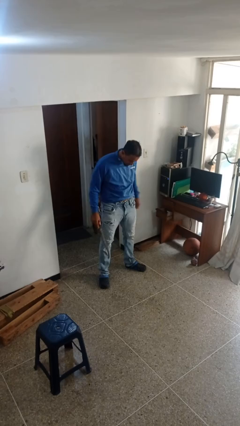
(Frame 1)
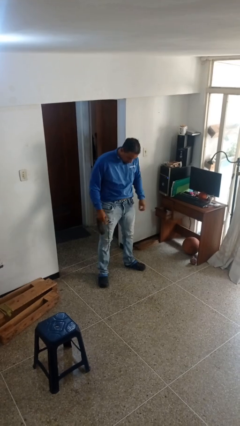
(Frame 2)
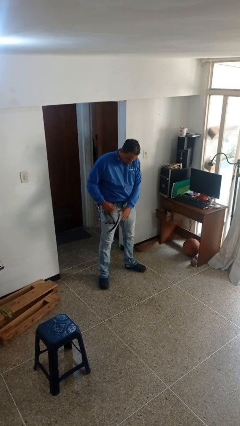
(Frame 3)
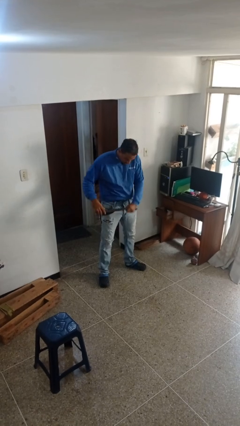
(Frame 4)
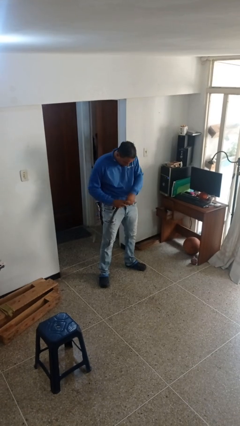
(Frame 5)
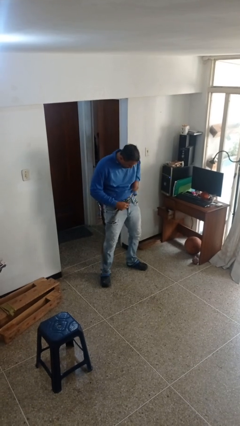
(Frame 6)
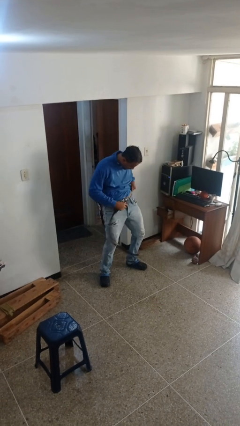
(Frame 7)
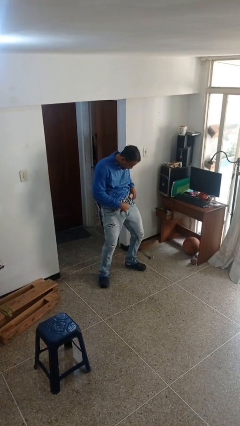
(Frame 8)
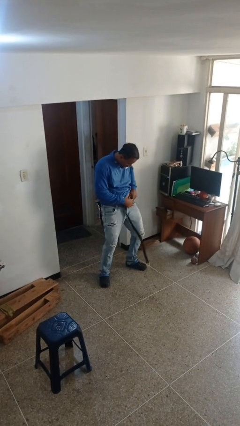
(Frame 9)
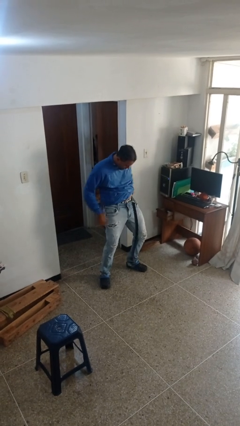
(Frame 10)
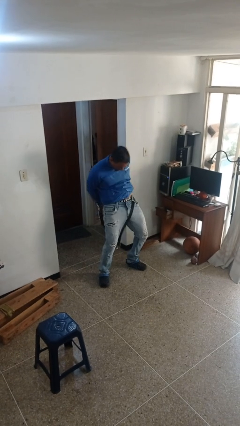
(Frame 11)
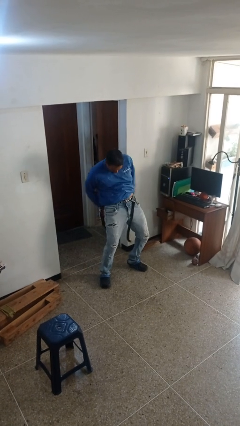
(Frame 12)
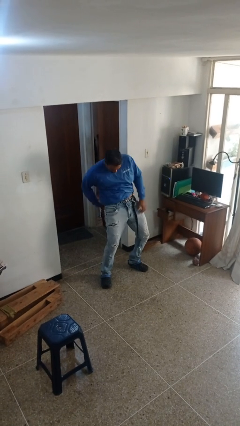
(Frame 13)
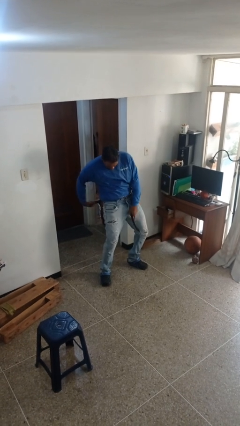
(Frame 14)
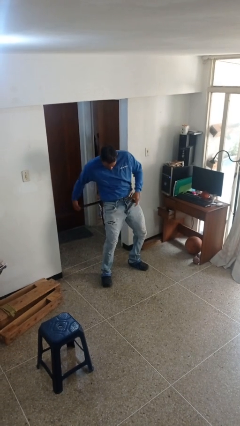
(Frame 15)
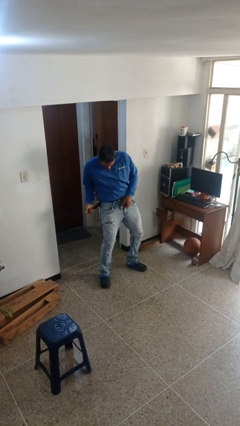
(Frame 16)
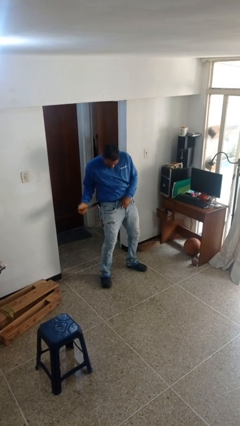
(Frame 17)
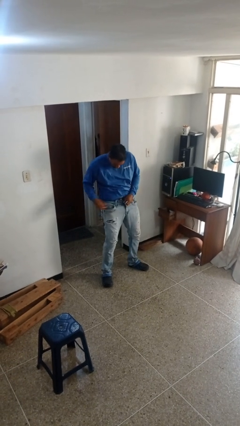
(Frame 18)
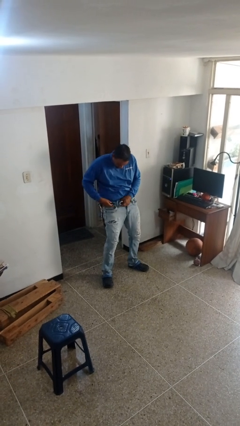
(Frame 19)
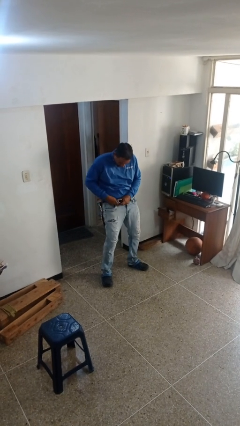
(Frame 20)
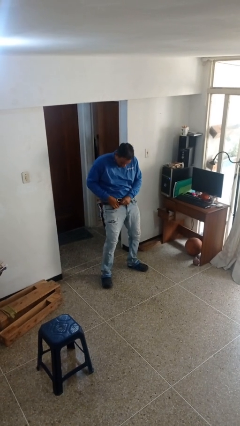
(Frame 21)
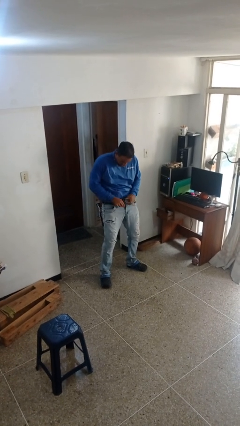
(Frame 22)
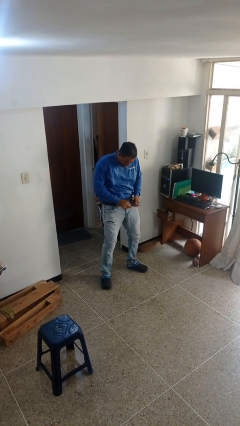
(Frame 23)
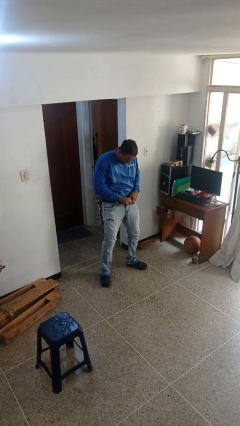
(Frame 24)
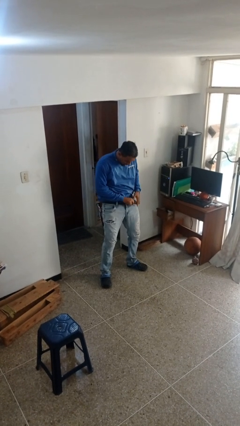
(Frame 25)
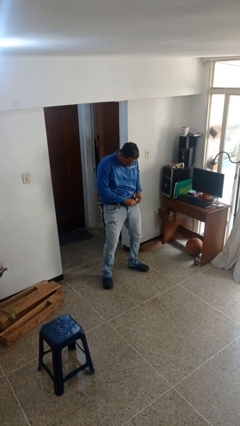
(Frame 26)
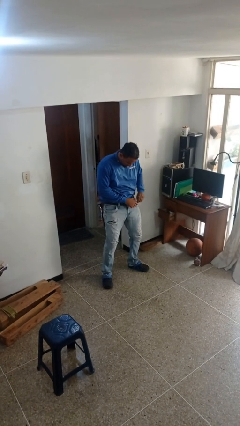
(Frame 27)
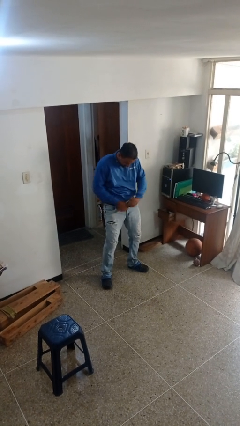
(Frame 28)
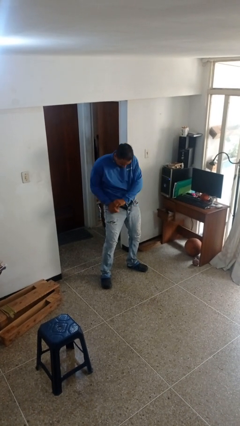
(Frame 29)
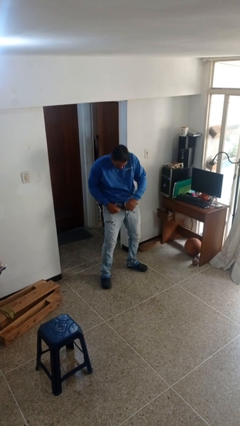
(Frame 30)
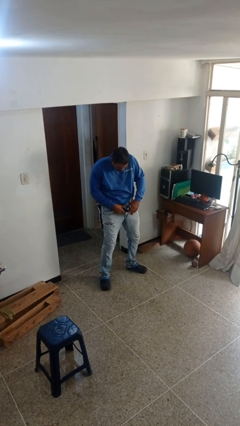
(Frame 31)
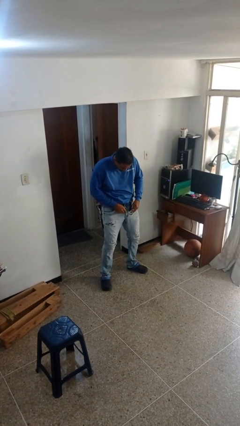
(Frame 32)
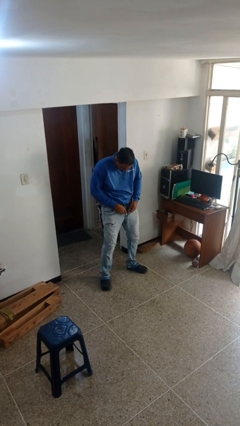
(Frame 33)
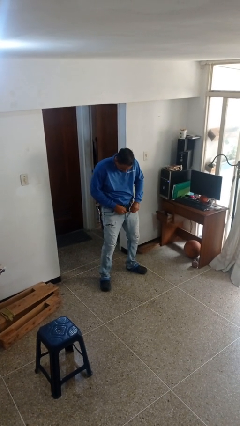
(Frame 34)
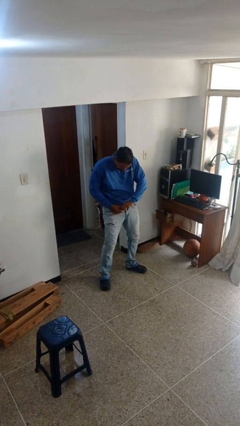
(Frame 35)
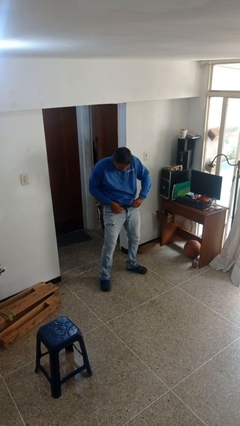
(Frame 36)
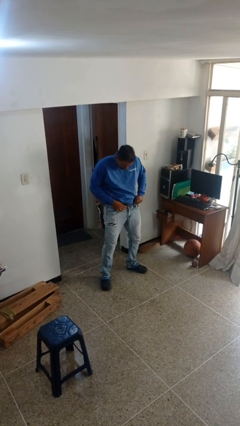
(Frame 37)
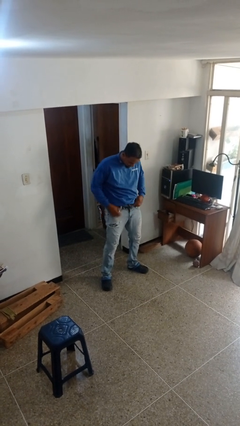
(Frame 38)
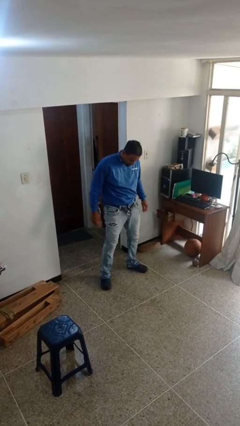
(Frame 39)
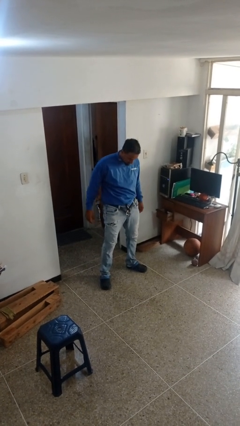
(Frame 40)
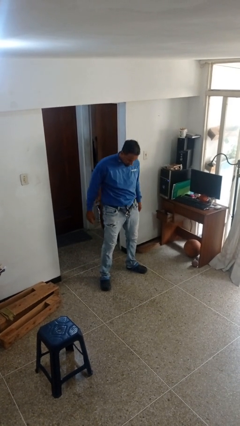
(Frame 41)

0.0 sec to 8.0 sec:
person puts on belt

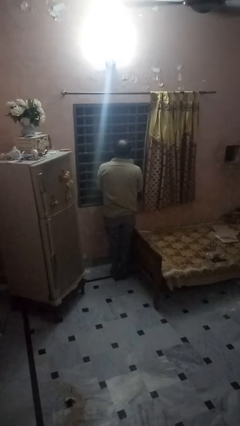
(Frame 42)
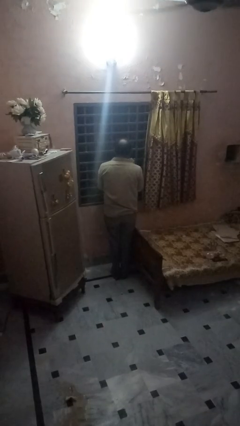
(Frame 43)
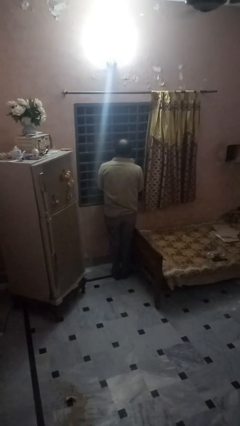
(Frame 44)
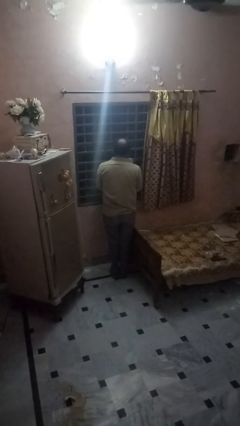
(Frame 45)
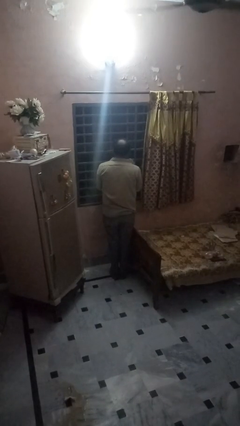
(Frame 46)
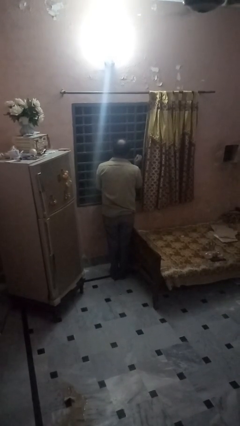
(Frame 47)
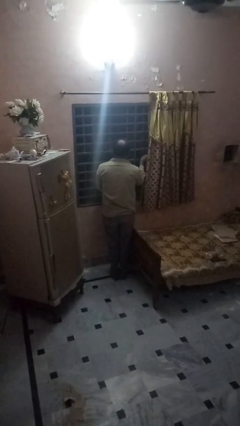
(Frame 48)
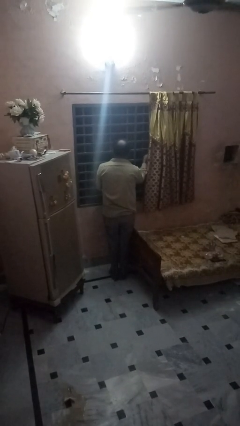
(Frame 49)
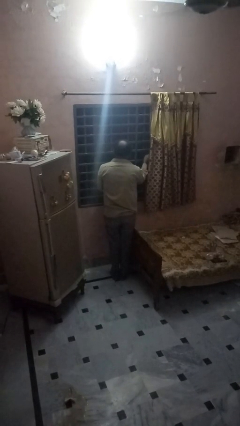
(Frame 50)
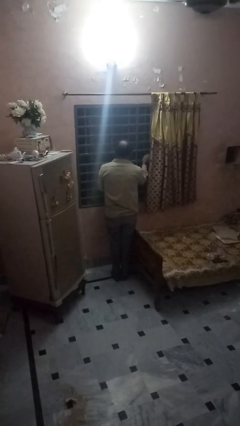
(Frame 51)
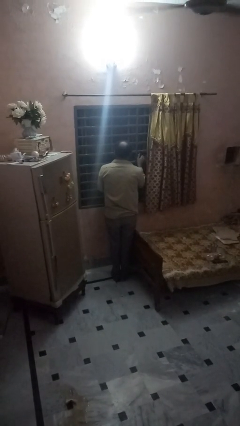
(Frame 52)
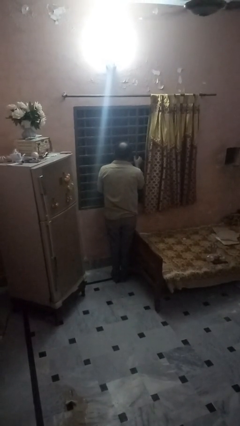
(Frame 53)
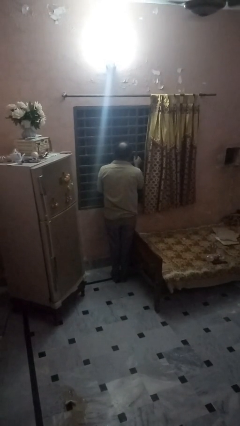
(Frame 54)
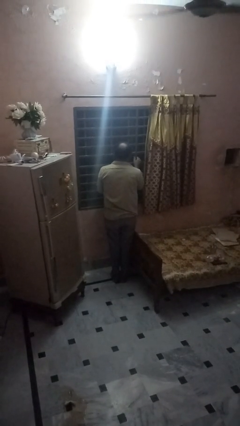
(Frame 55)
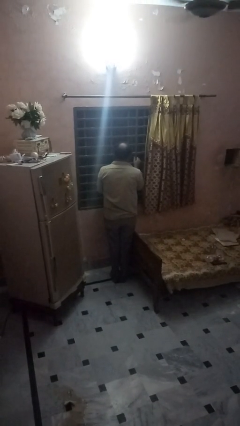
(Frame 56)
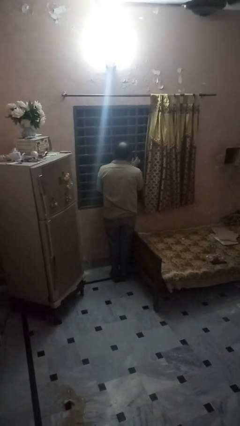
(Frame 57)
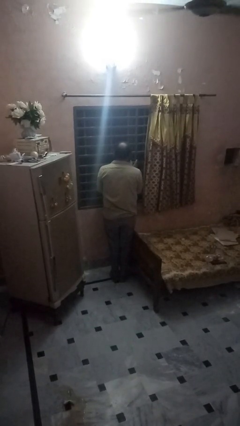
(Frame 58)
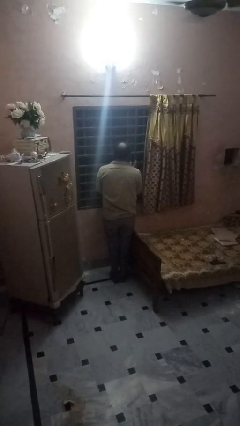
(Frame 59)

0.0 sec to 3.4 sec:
person closes home window

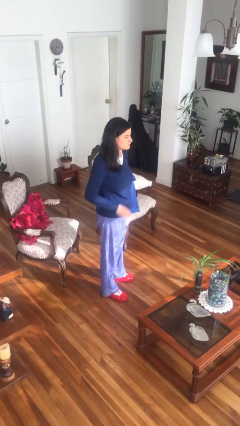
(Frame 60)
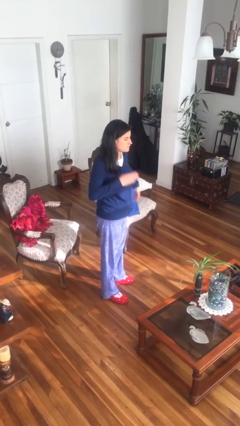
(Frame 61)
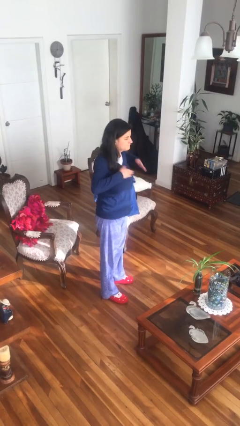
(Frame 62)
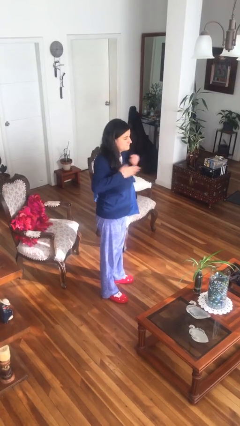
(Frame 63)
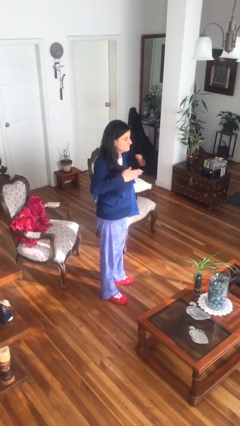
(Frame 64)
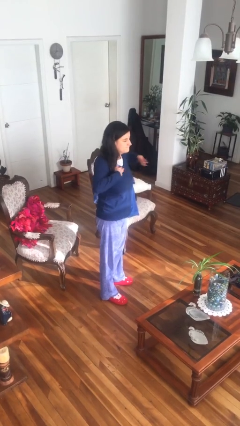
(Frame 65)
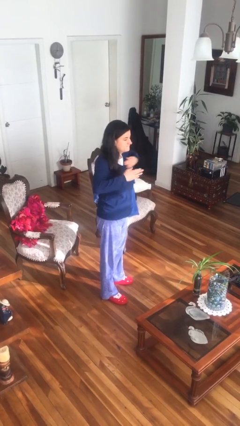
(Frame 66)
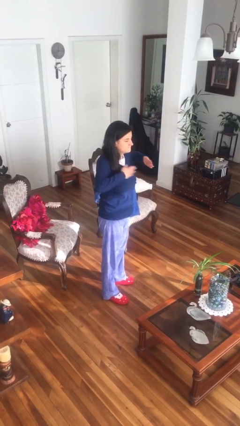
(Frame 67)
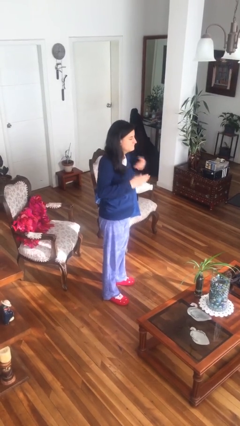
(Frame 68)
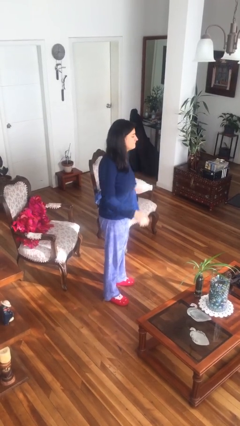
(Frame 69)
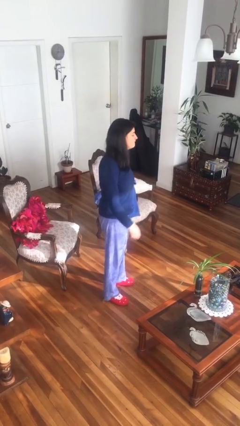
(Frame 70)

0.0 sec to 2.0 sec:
person drums on chest

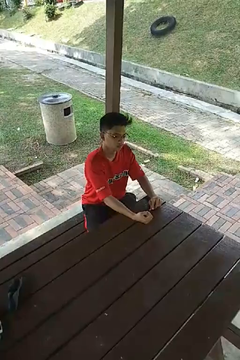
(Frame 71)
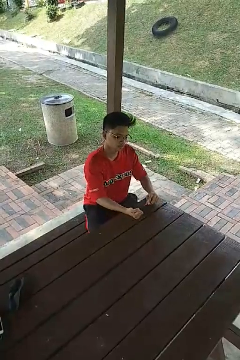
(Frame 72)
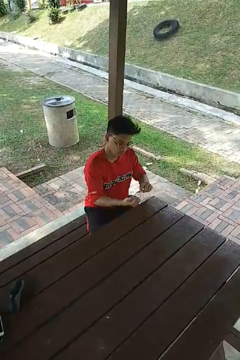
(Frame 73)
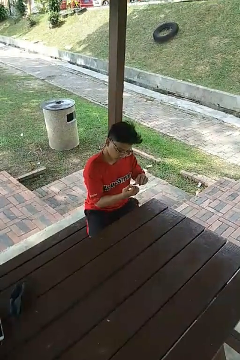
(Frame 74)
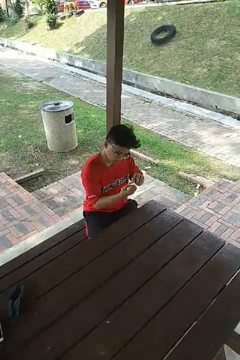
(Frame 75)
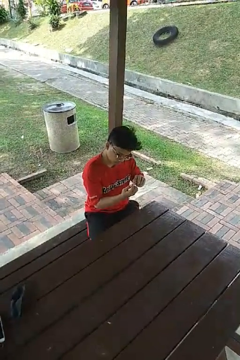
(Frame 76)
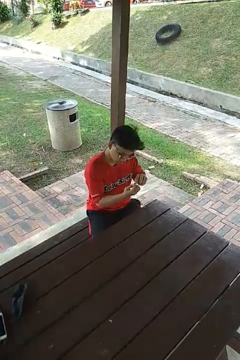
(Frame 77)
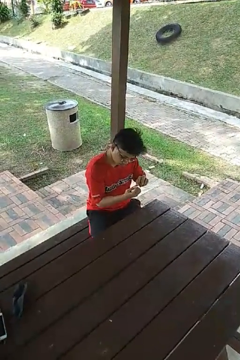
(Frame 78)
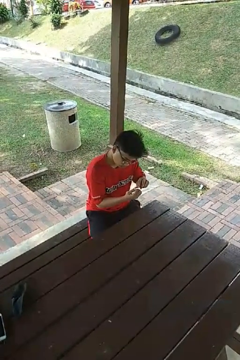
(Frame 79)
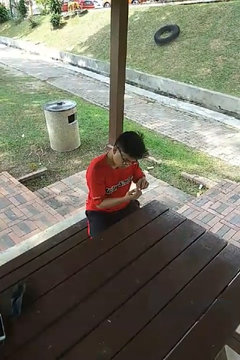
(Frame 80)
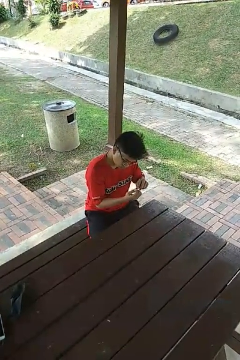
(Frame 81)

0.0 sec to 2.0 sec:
person paints fingernails

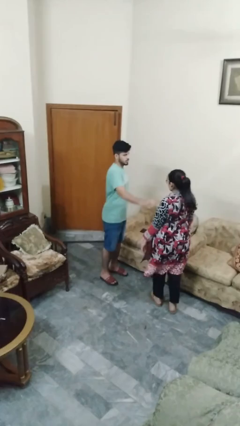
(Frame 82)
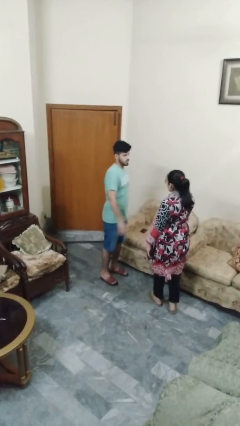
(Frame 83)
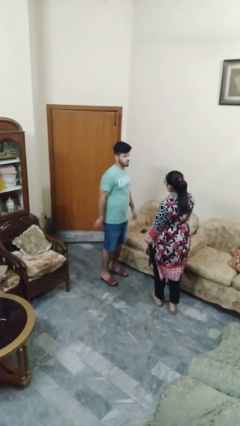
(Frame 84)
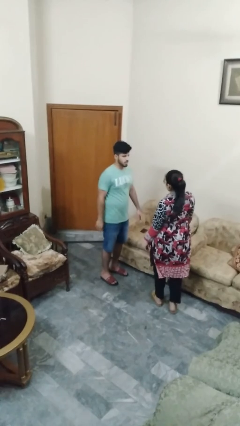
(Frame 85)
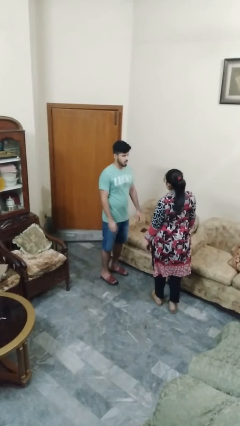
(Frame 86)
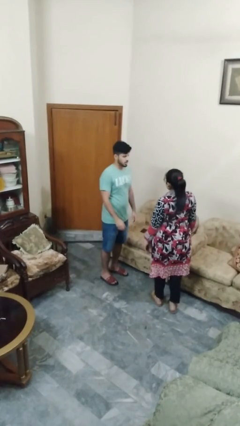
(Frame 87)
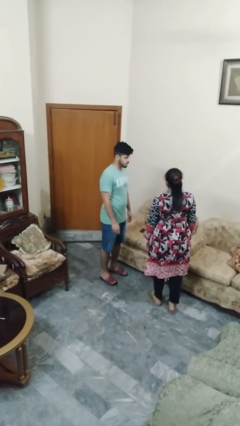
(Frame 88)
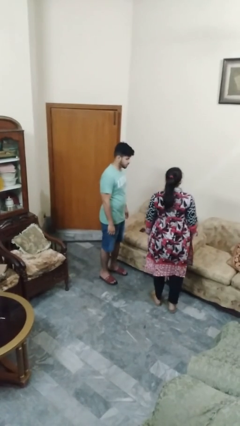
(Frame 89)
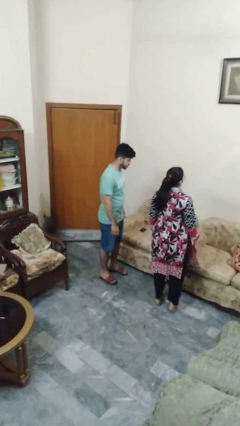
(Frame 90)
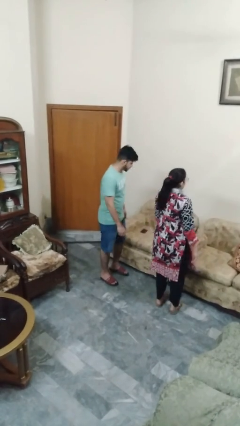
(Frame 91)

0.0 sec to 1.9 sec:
person spins person around

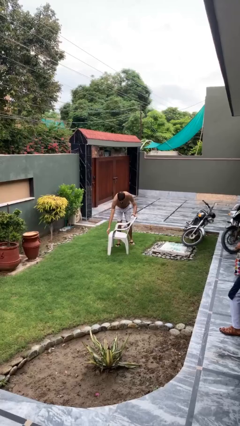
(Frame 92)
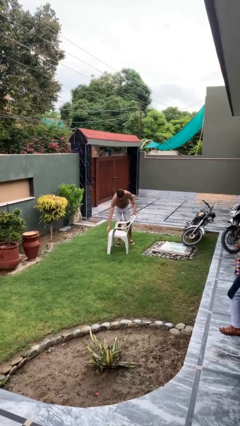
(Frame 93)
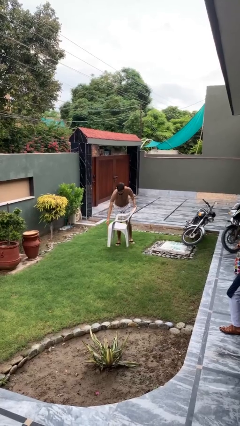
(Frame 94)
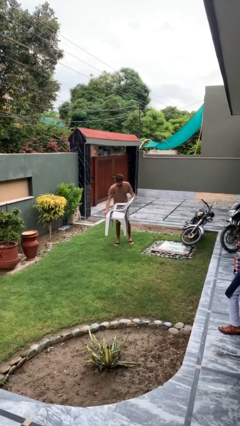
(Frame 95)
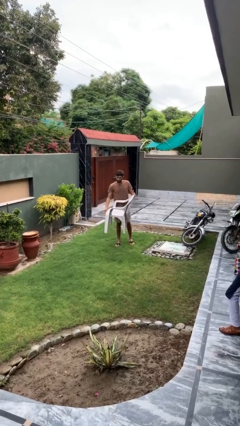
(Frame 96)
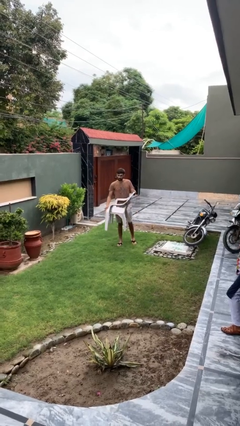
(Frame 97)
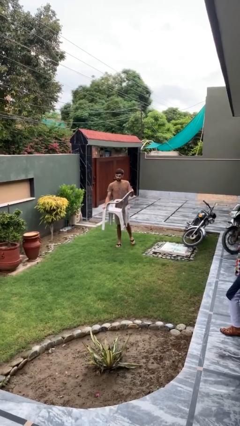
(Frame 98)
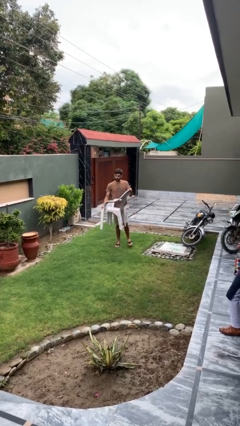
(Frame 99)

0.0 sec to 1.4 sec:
person picks up object from floor
